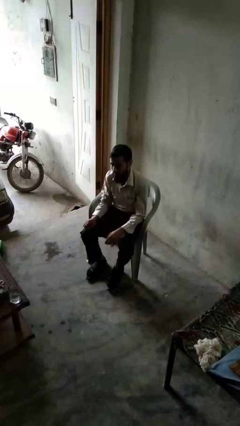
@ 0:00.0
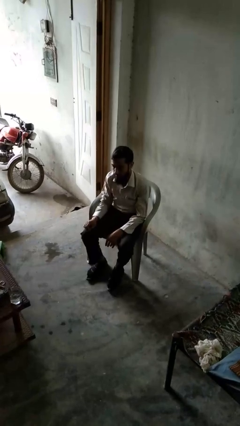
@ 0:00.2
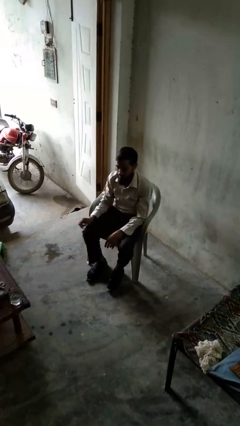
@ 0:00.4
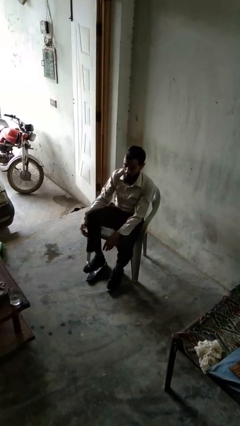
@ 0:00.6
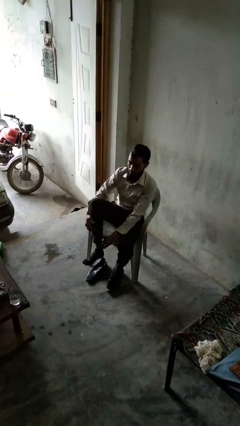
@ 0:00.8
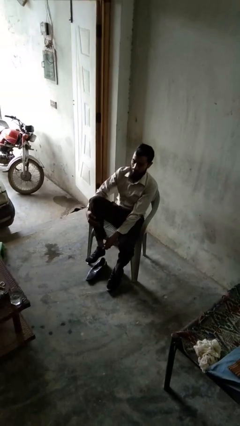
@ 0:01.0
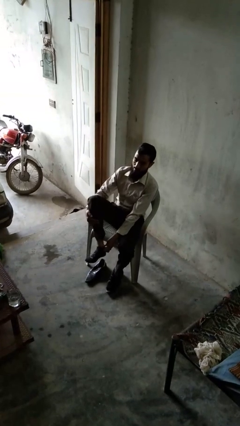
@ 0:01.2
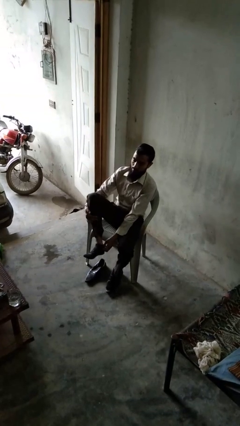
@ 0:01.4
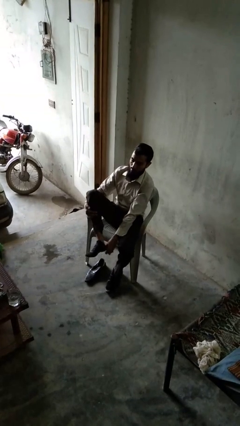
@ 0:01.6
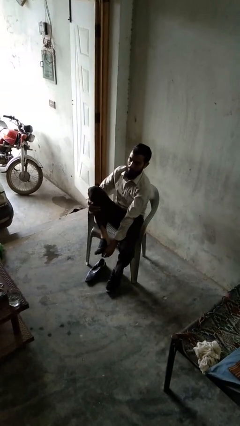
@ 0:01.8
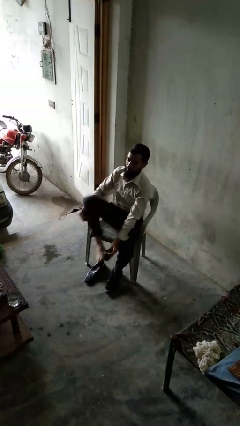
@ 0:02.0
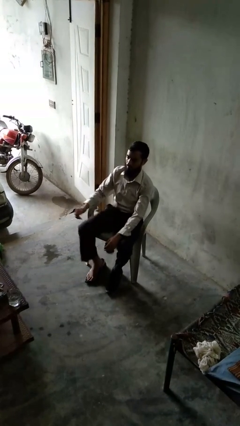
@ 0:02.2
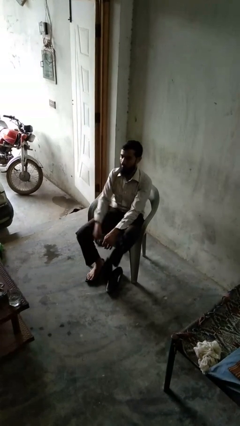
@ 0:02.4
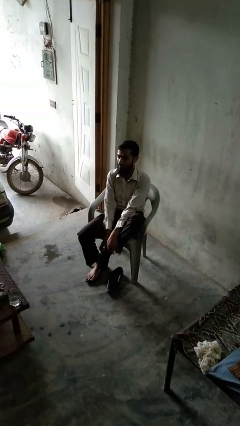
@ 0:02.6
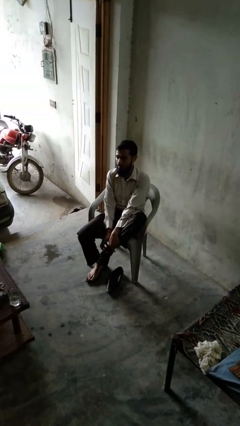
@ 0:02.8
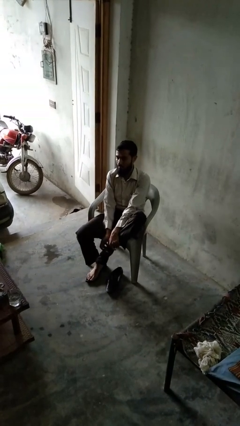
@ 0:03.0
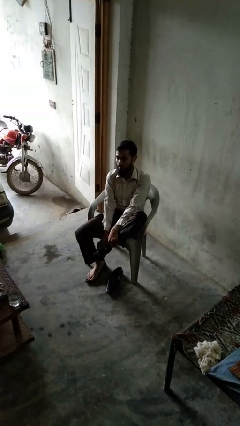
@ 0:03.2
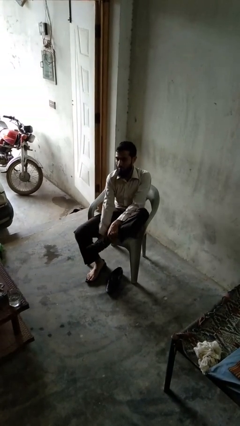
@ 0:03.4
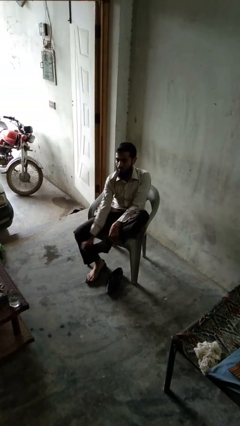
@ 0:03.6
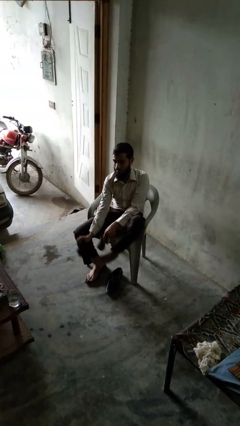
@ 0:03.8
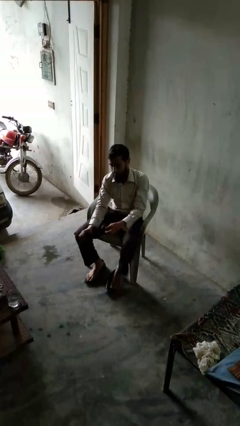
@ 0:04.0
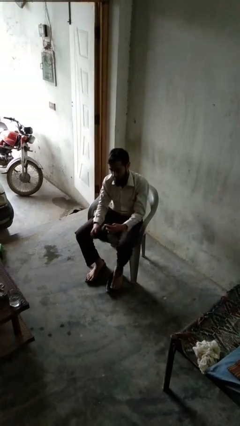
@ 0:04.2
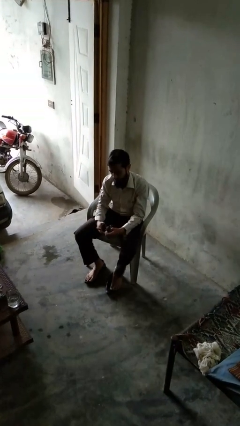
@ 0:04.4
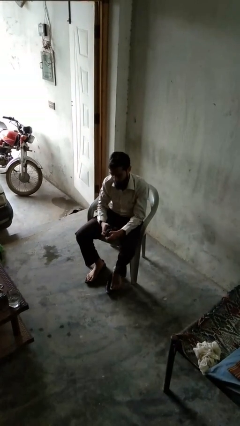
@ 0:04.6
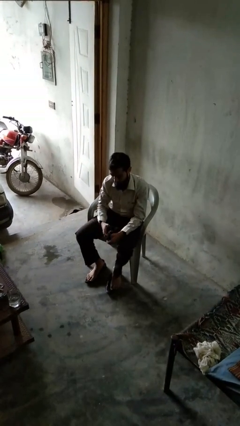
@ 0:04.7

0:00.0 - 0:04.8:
person takes off socks

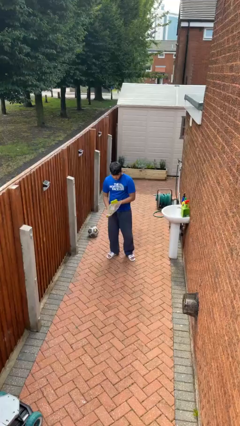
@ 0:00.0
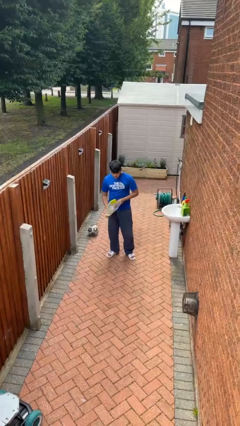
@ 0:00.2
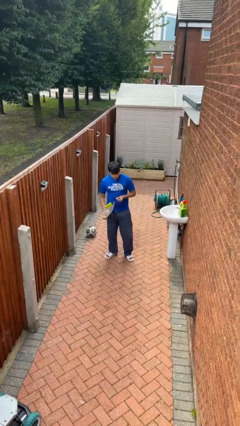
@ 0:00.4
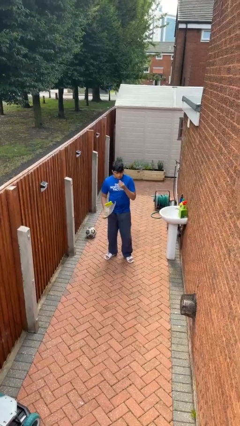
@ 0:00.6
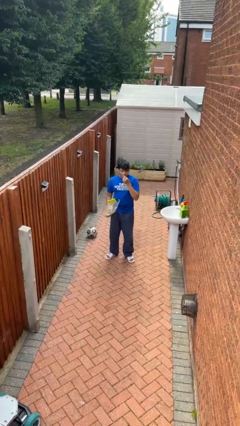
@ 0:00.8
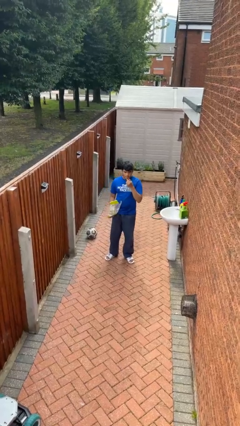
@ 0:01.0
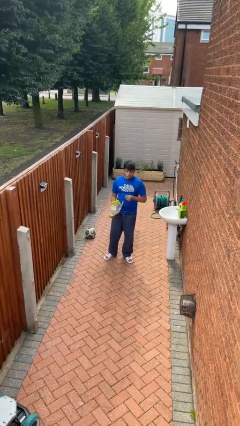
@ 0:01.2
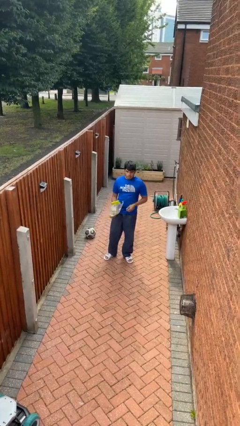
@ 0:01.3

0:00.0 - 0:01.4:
person eats snack from bag

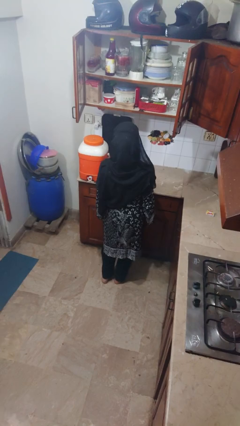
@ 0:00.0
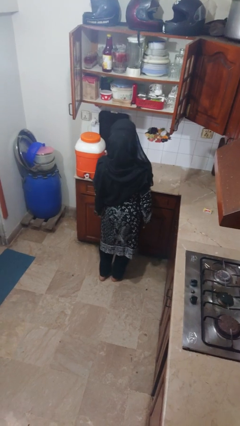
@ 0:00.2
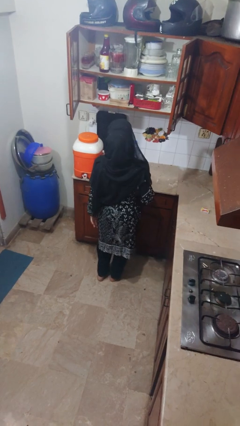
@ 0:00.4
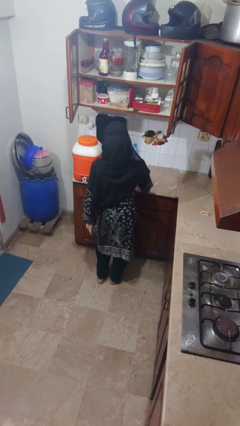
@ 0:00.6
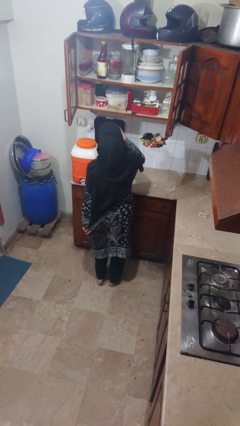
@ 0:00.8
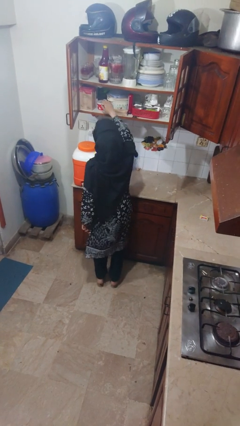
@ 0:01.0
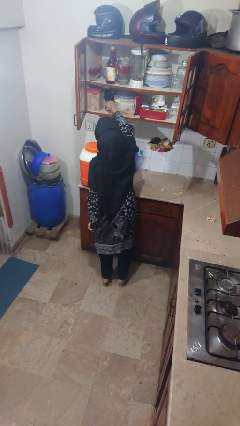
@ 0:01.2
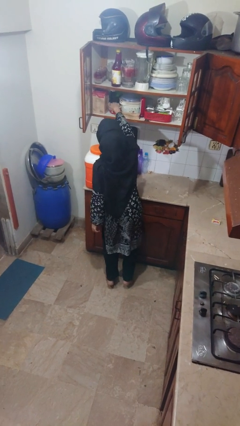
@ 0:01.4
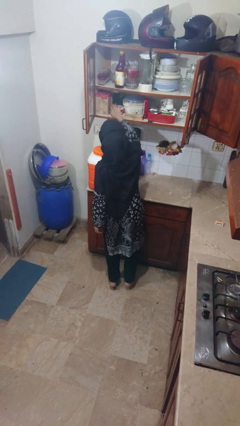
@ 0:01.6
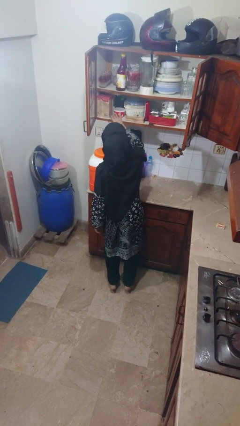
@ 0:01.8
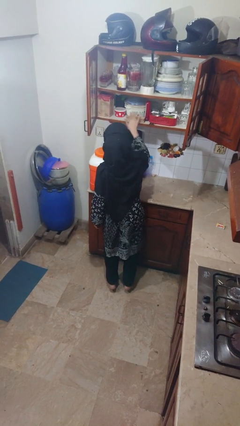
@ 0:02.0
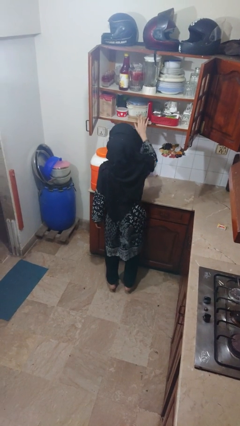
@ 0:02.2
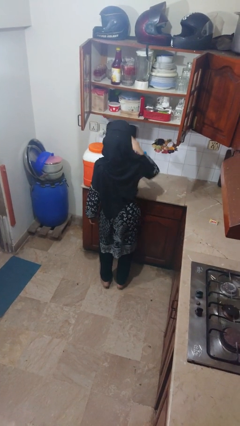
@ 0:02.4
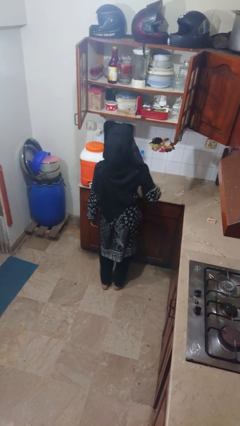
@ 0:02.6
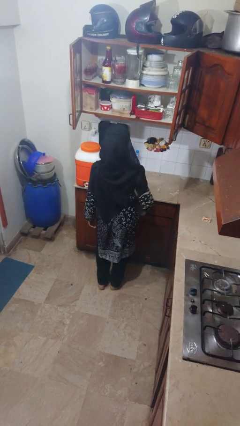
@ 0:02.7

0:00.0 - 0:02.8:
person searches in cabinet

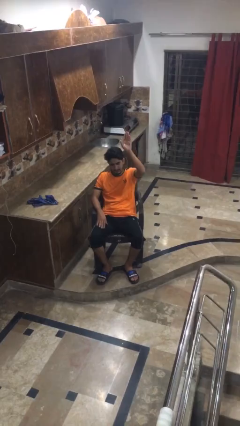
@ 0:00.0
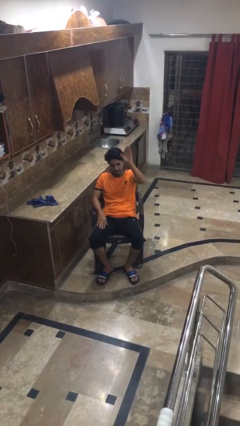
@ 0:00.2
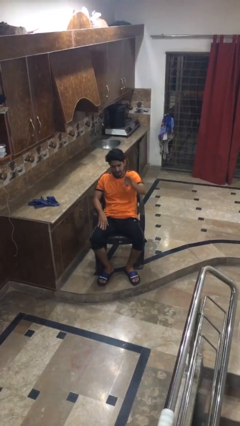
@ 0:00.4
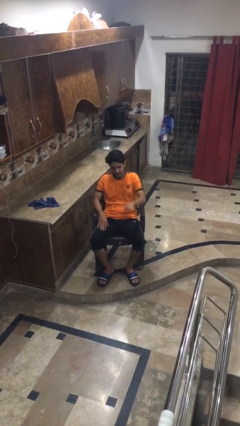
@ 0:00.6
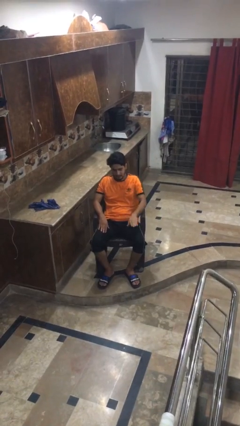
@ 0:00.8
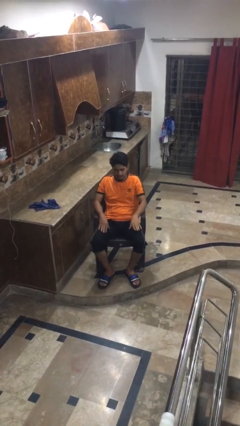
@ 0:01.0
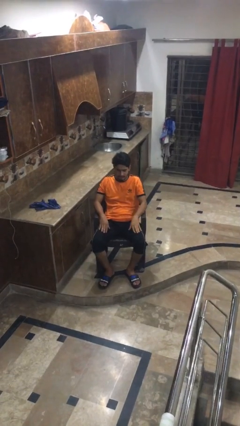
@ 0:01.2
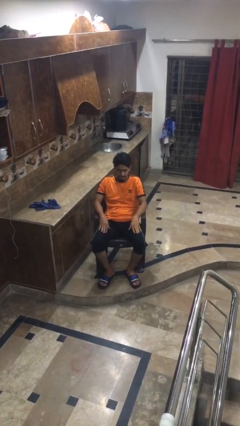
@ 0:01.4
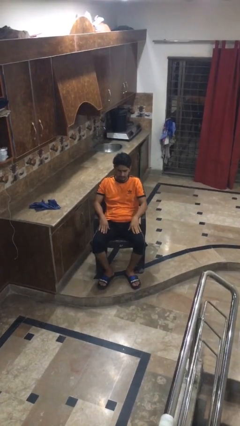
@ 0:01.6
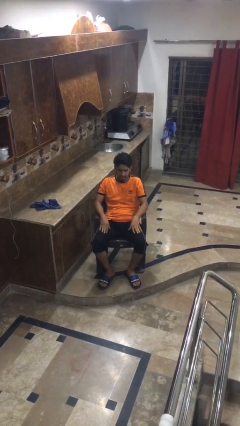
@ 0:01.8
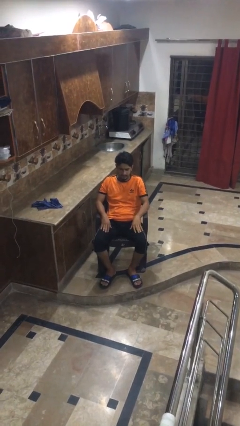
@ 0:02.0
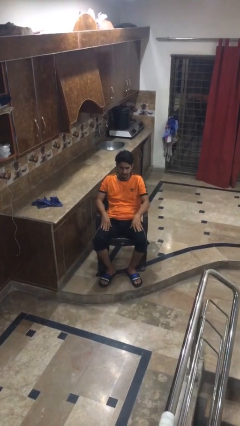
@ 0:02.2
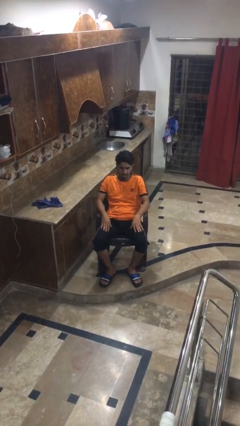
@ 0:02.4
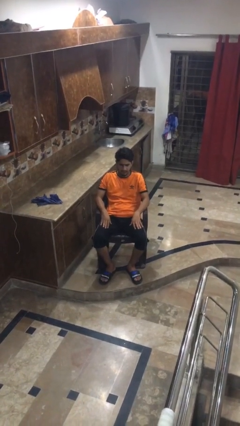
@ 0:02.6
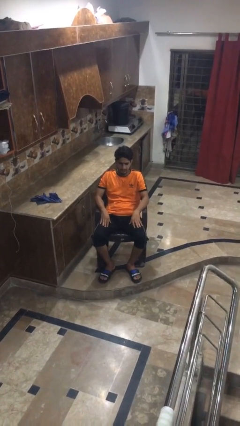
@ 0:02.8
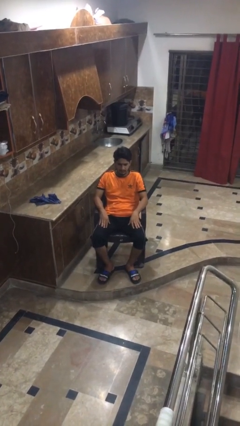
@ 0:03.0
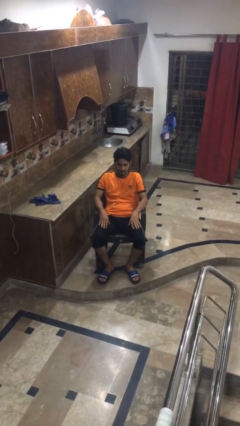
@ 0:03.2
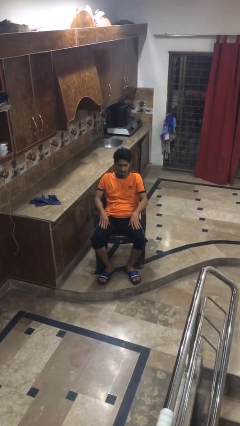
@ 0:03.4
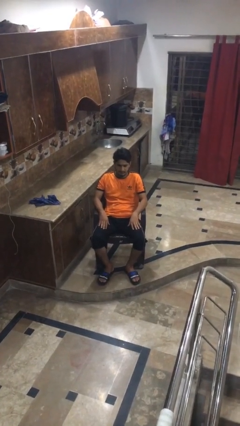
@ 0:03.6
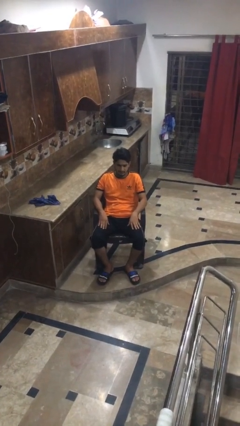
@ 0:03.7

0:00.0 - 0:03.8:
person gestures lower hand

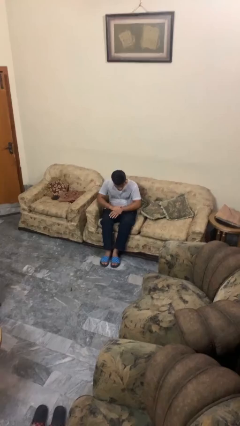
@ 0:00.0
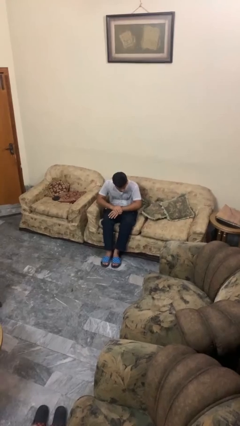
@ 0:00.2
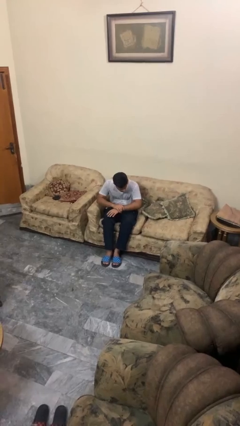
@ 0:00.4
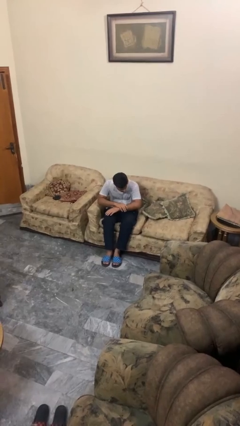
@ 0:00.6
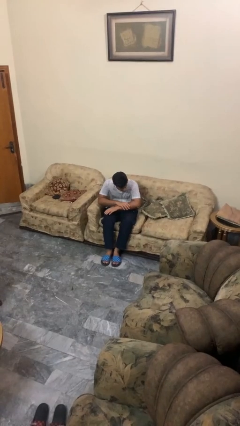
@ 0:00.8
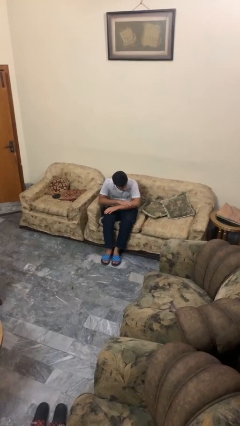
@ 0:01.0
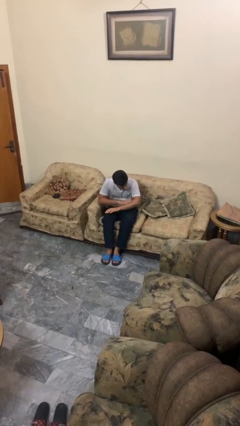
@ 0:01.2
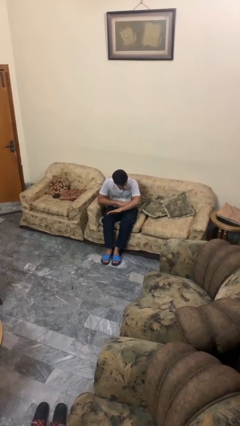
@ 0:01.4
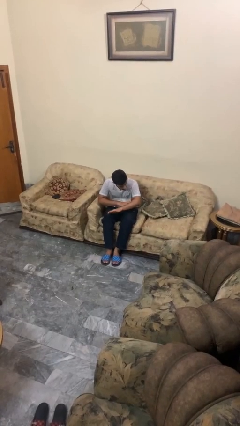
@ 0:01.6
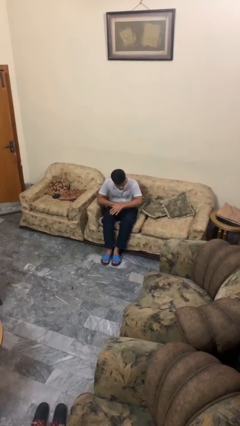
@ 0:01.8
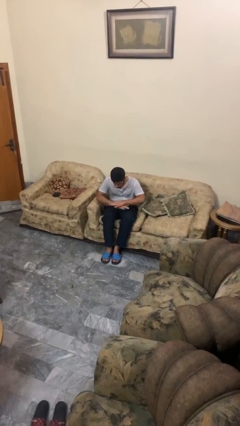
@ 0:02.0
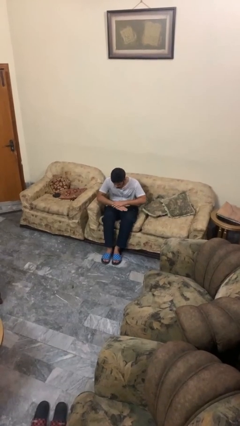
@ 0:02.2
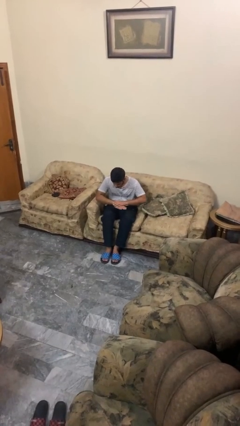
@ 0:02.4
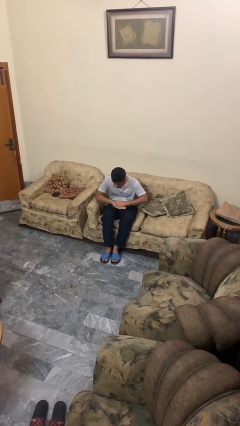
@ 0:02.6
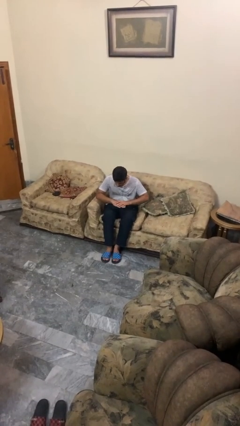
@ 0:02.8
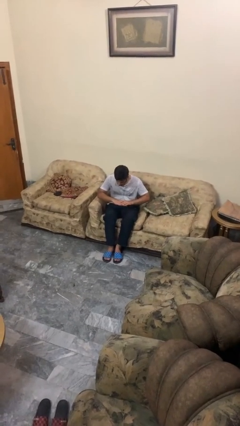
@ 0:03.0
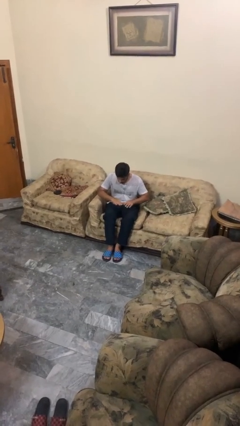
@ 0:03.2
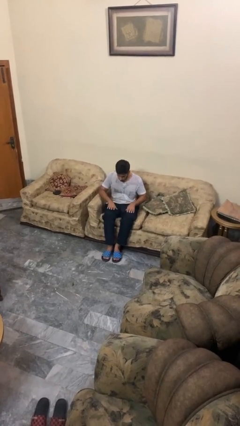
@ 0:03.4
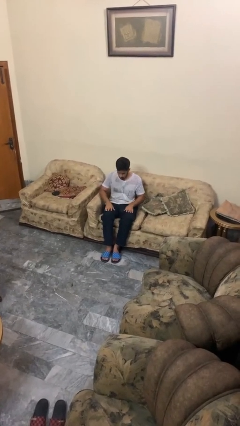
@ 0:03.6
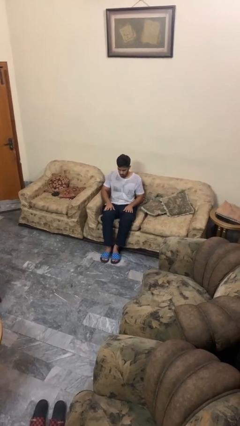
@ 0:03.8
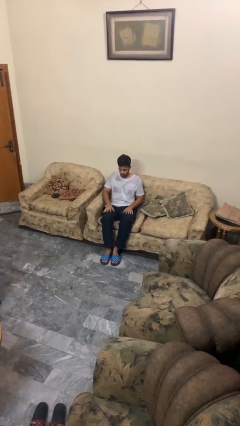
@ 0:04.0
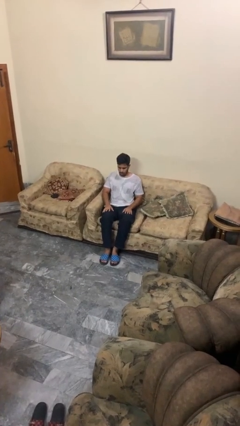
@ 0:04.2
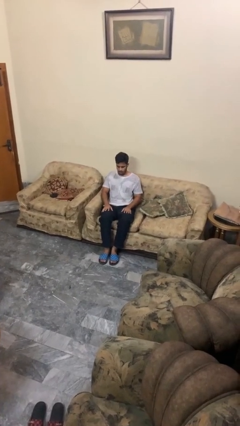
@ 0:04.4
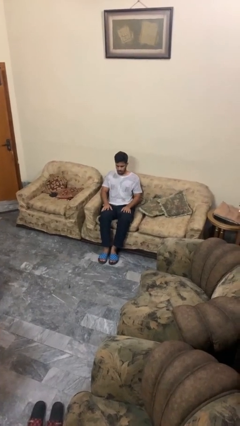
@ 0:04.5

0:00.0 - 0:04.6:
person looks at hands in lap
